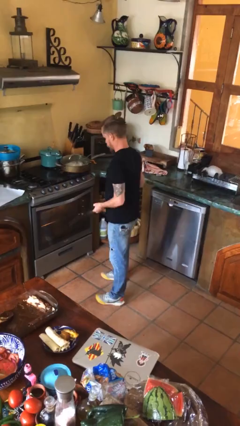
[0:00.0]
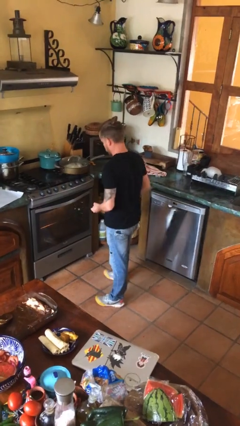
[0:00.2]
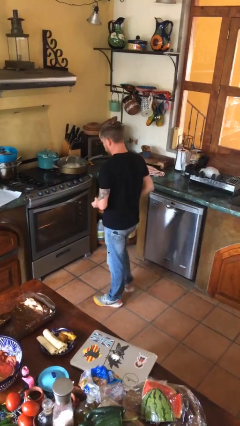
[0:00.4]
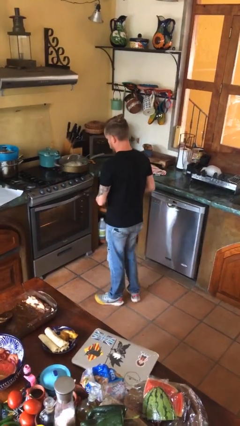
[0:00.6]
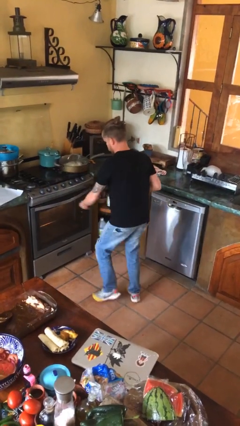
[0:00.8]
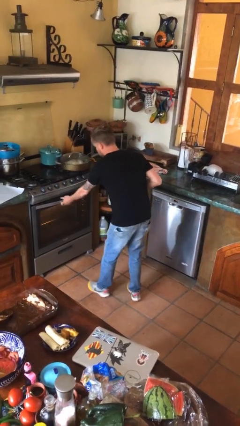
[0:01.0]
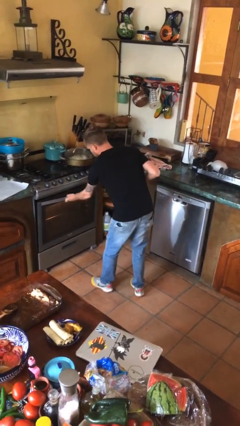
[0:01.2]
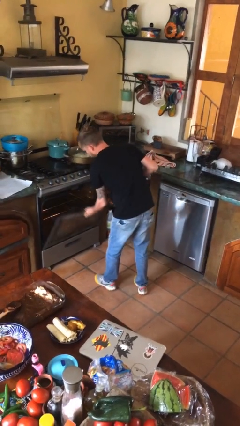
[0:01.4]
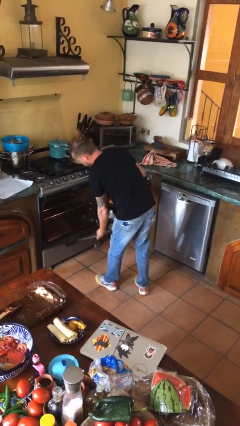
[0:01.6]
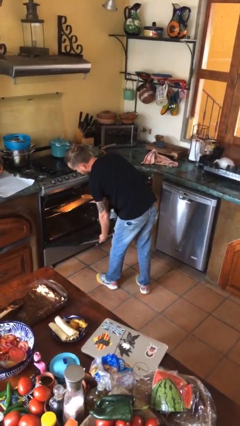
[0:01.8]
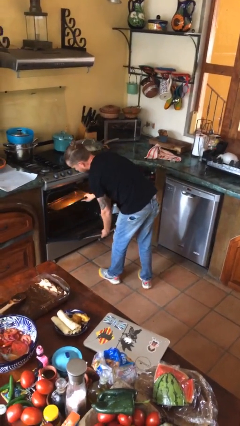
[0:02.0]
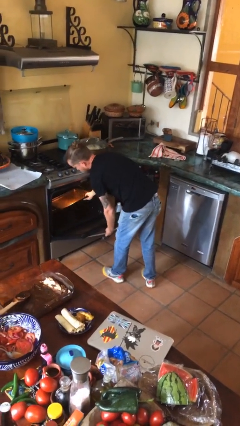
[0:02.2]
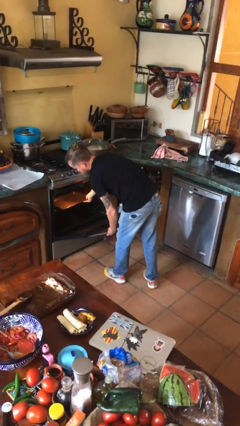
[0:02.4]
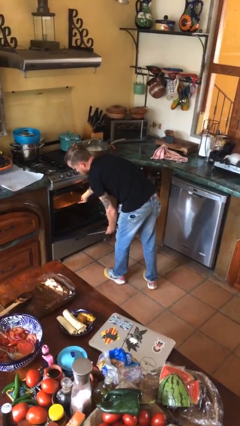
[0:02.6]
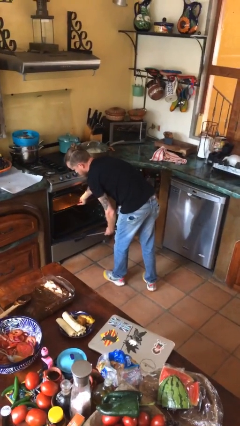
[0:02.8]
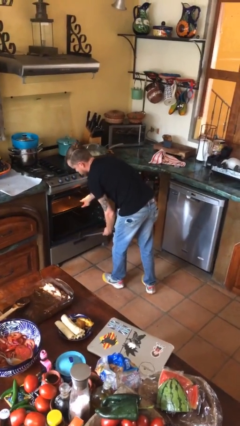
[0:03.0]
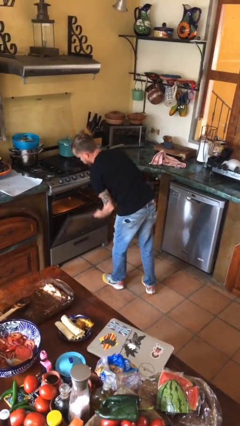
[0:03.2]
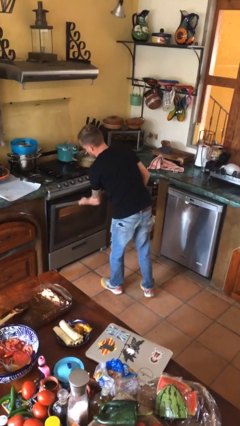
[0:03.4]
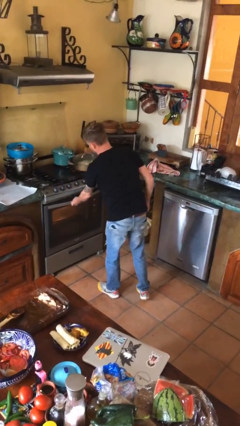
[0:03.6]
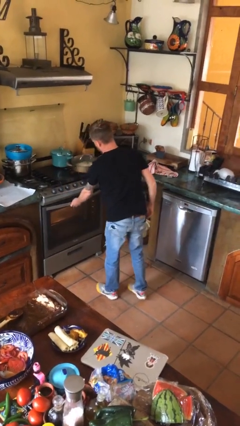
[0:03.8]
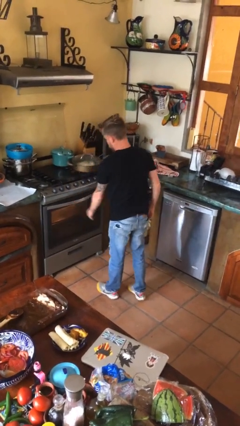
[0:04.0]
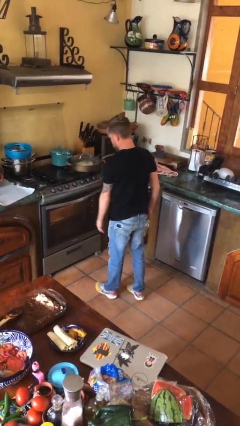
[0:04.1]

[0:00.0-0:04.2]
person puts object into oven

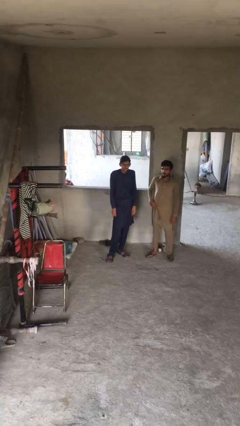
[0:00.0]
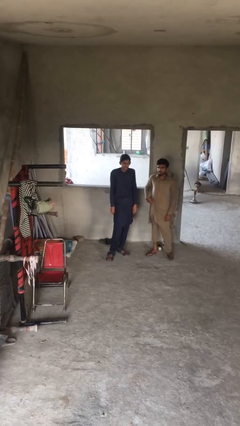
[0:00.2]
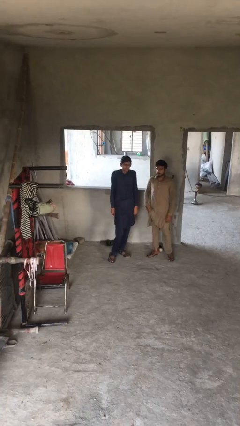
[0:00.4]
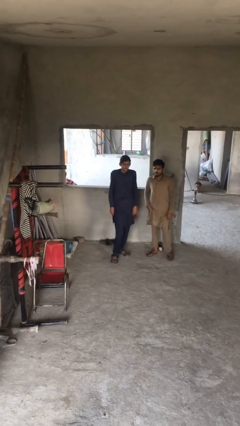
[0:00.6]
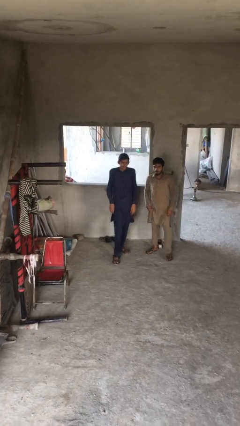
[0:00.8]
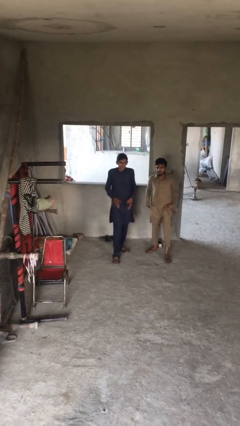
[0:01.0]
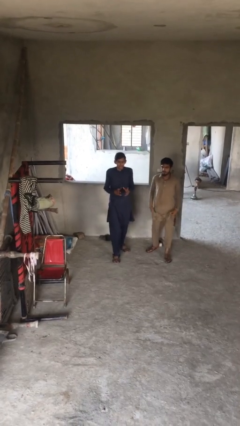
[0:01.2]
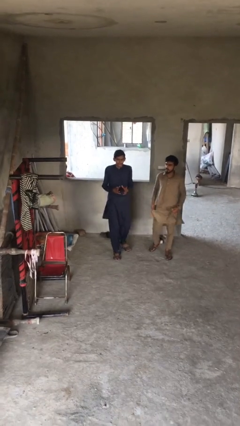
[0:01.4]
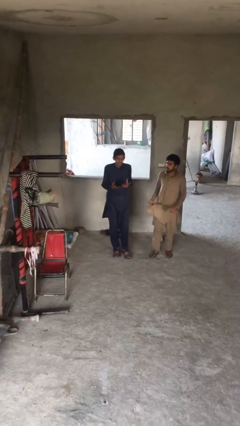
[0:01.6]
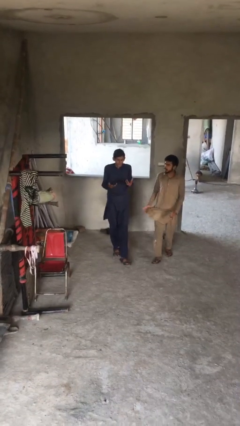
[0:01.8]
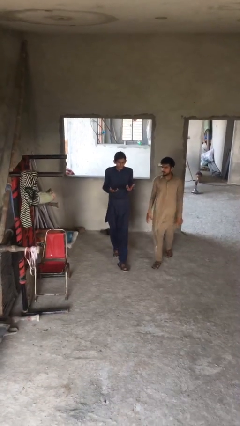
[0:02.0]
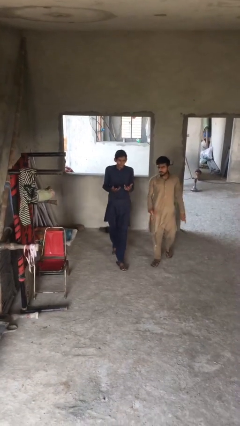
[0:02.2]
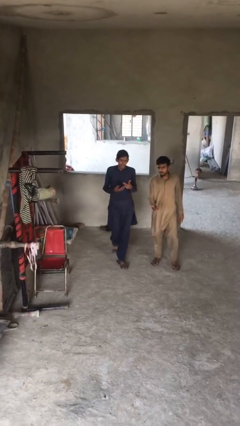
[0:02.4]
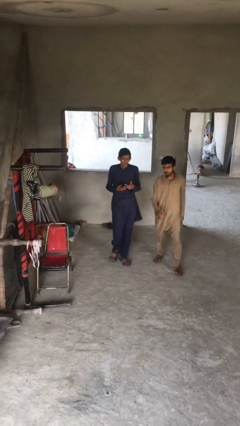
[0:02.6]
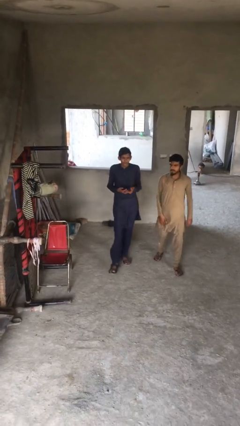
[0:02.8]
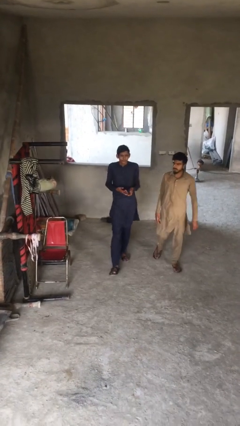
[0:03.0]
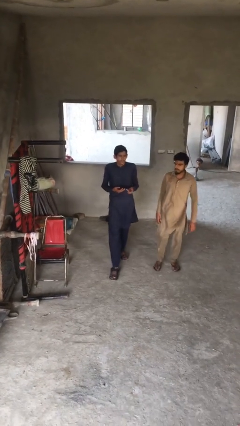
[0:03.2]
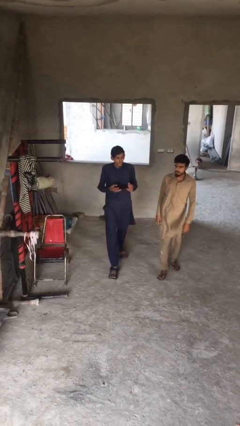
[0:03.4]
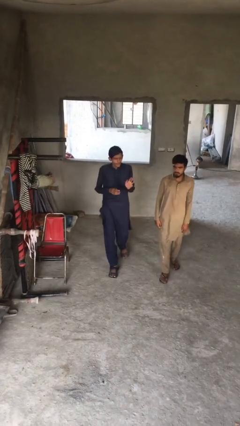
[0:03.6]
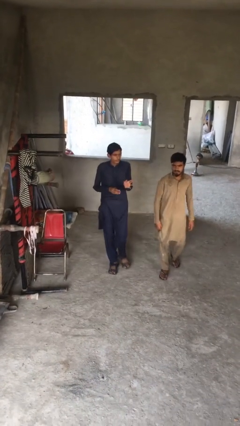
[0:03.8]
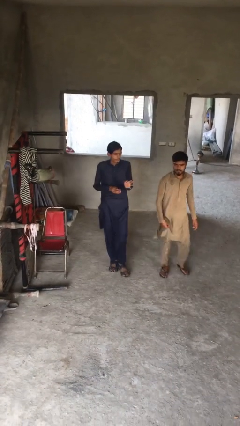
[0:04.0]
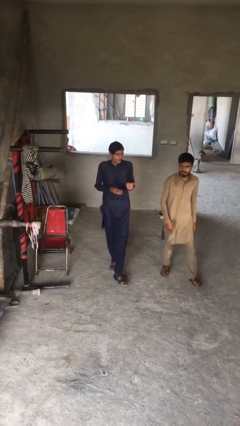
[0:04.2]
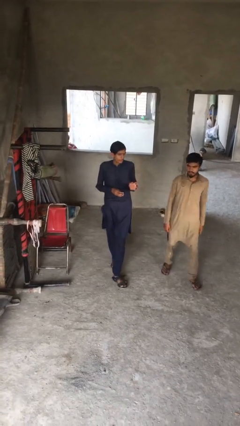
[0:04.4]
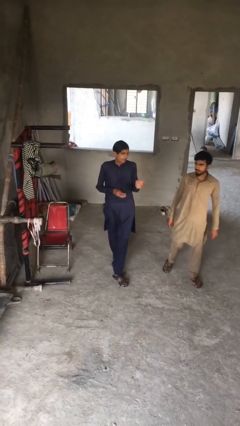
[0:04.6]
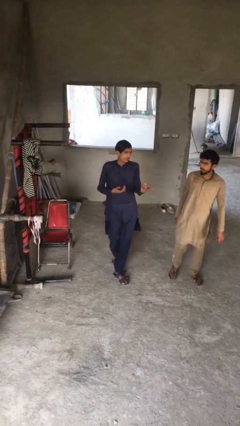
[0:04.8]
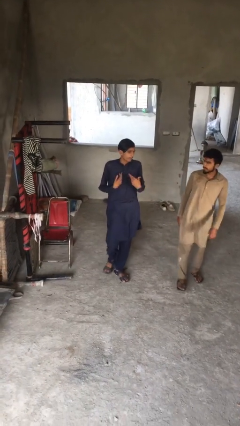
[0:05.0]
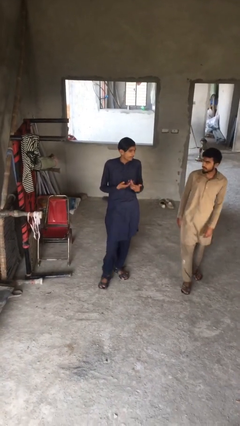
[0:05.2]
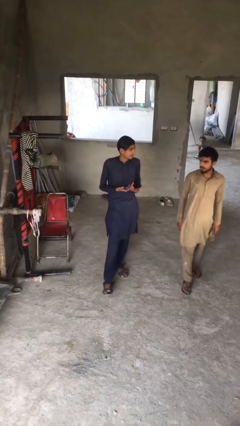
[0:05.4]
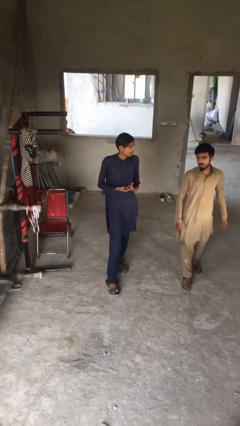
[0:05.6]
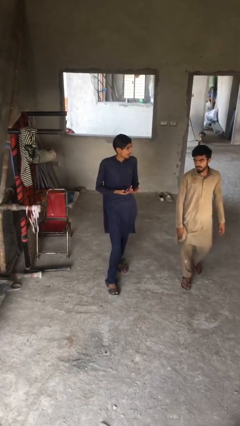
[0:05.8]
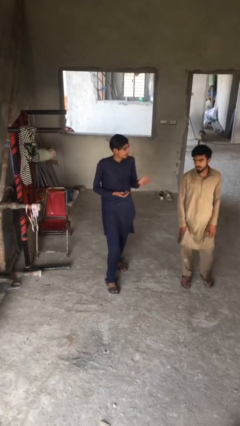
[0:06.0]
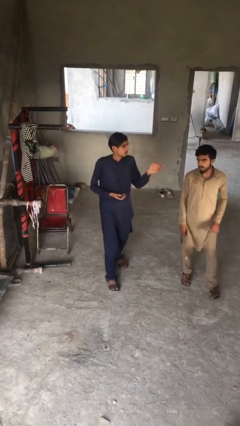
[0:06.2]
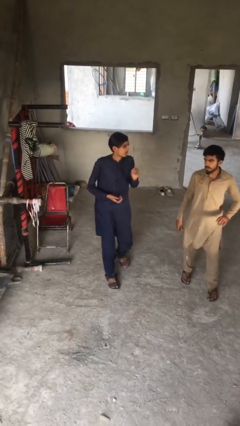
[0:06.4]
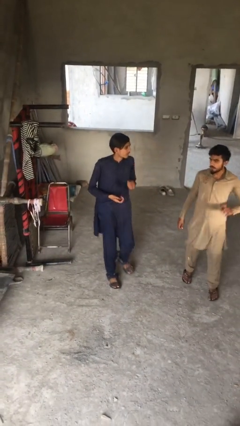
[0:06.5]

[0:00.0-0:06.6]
person talks to person

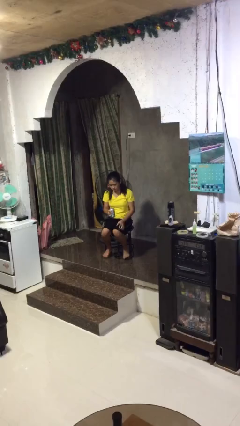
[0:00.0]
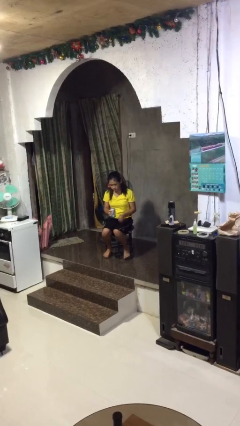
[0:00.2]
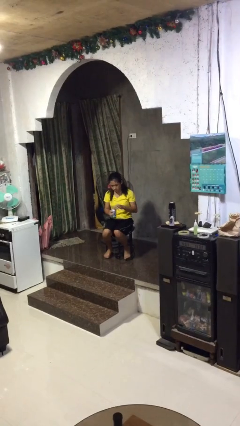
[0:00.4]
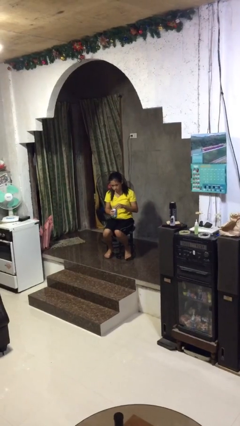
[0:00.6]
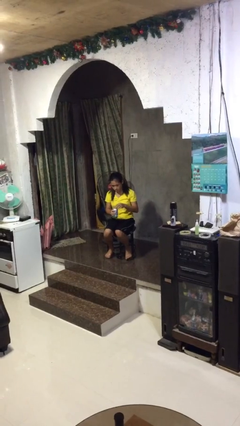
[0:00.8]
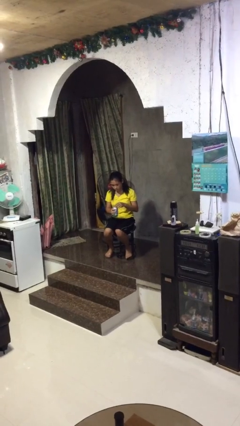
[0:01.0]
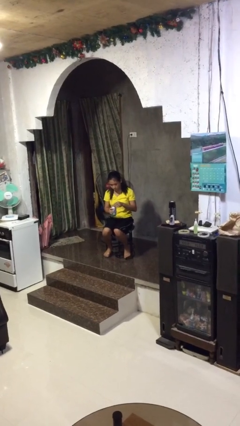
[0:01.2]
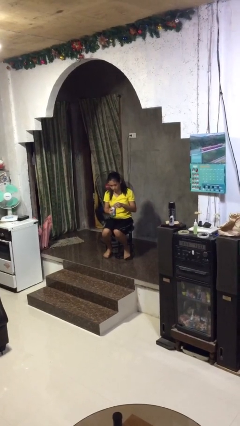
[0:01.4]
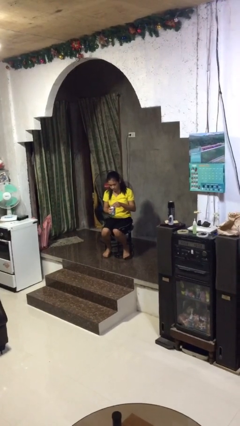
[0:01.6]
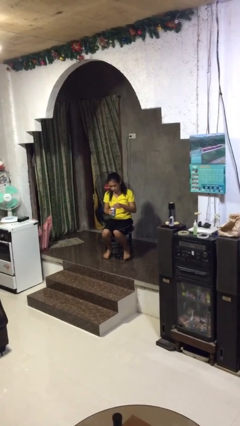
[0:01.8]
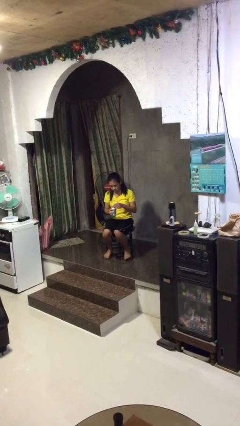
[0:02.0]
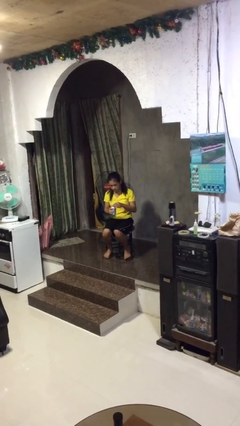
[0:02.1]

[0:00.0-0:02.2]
person opens beverage can

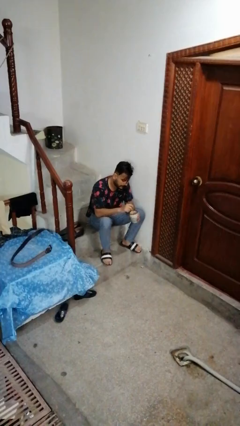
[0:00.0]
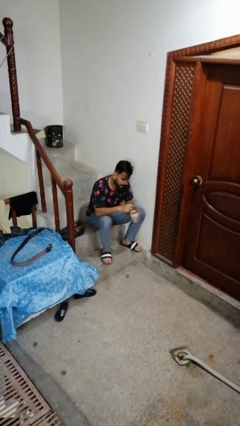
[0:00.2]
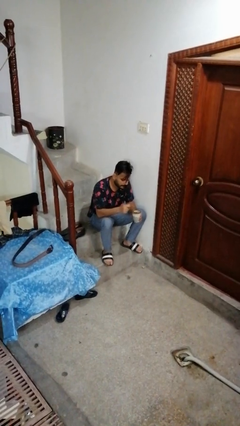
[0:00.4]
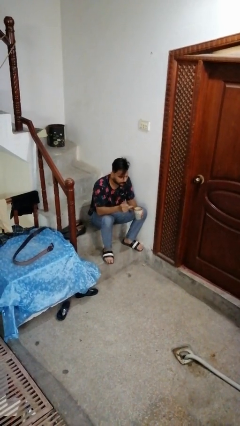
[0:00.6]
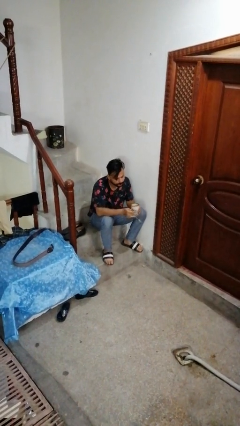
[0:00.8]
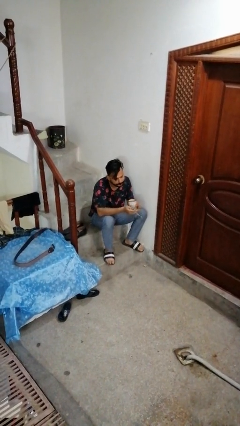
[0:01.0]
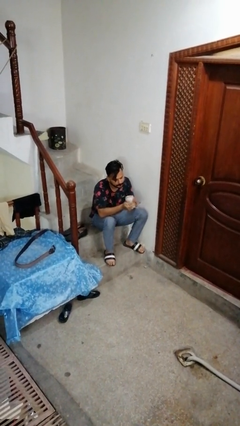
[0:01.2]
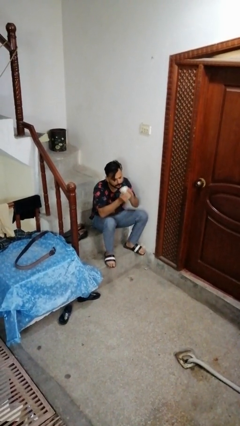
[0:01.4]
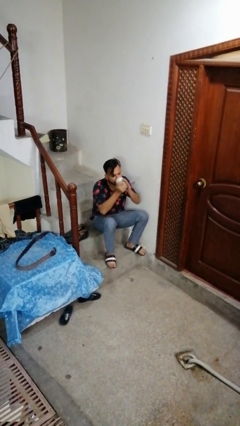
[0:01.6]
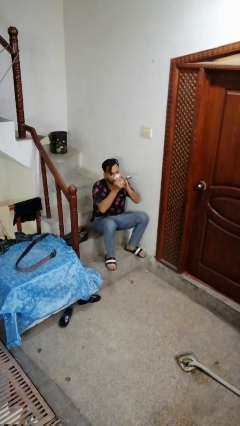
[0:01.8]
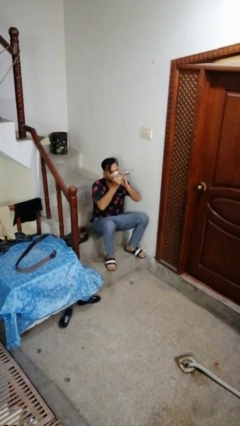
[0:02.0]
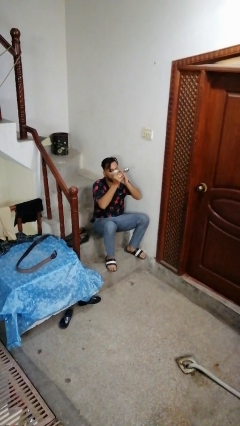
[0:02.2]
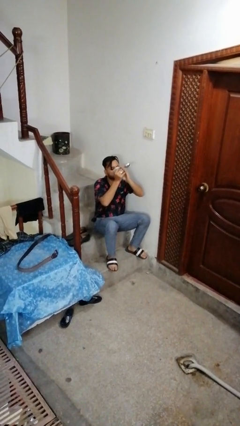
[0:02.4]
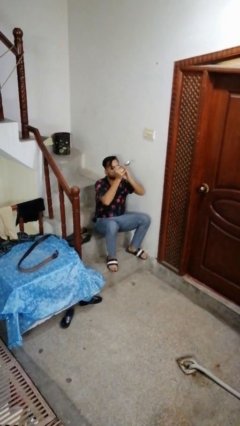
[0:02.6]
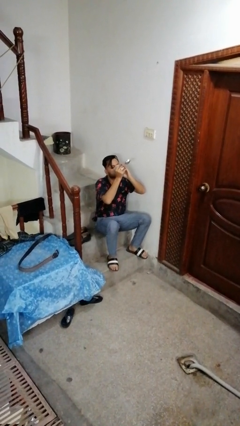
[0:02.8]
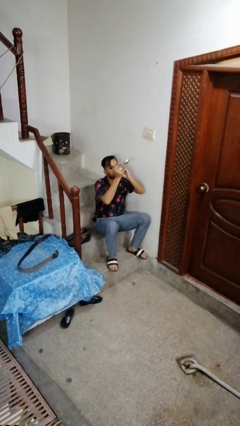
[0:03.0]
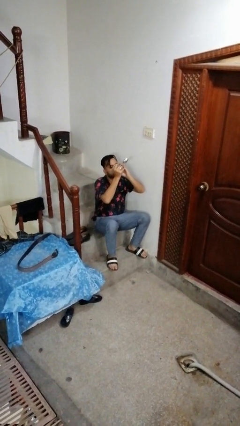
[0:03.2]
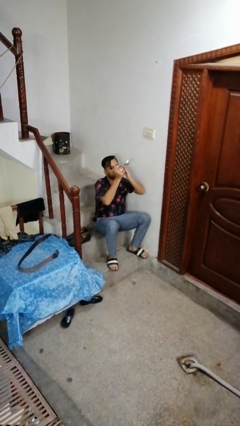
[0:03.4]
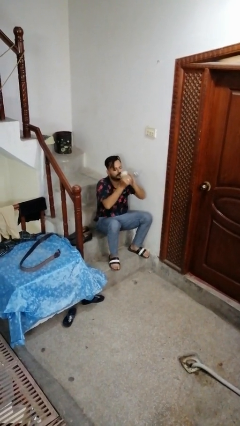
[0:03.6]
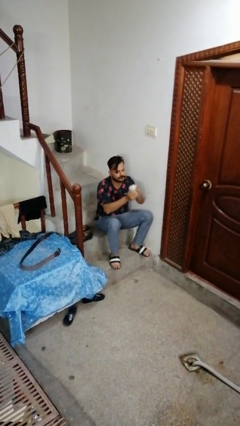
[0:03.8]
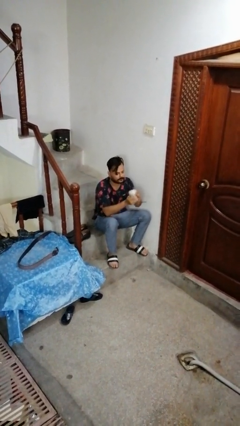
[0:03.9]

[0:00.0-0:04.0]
person drinks from mug

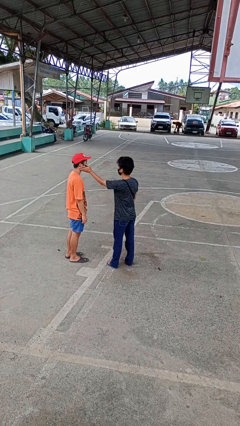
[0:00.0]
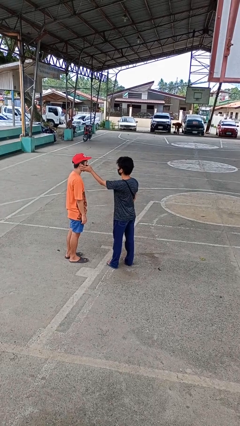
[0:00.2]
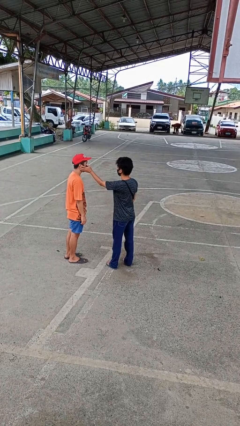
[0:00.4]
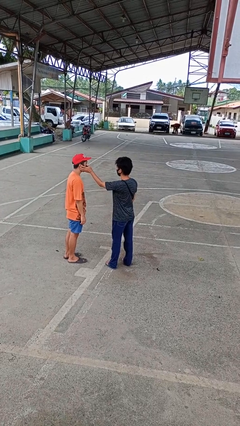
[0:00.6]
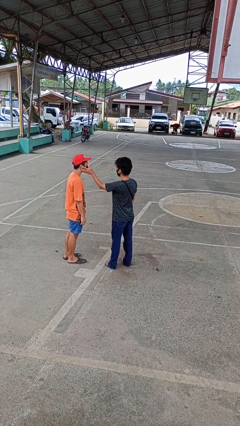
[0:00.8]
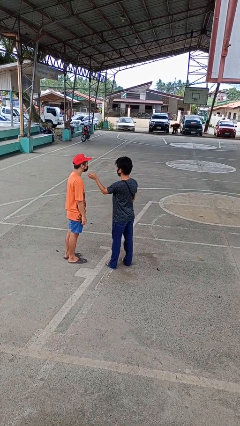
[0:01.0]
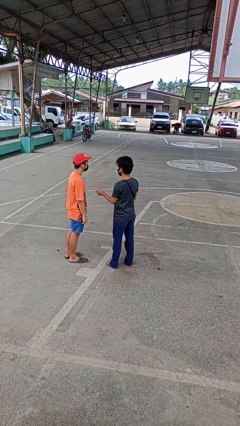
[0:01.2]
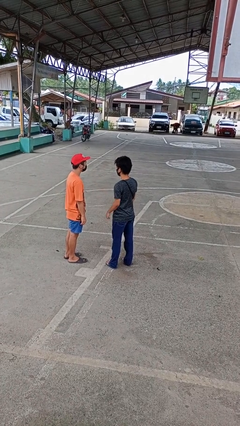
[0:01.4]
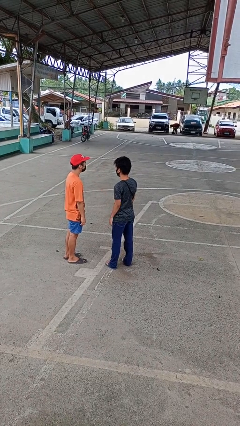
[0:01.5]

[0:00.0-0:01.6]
person touches face of person
